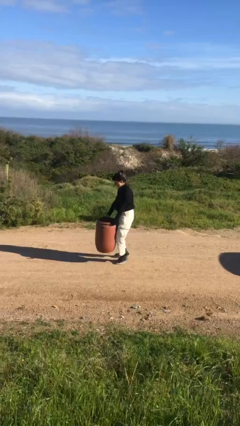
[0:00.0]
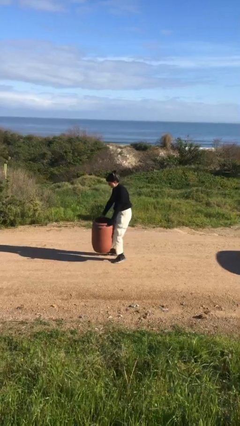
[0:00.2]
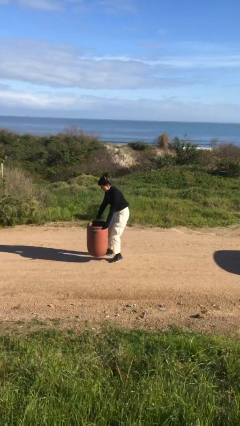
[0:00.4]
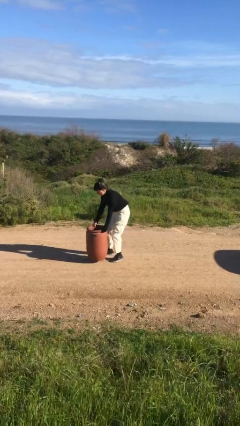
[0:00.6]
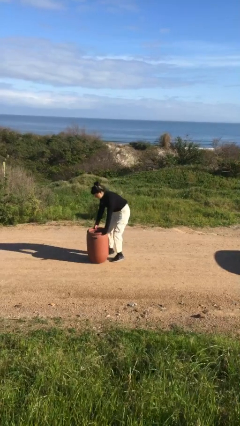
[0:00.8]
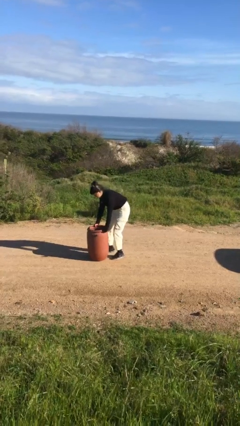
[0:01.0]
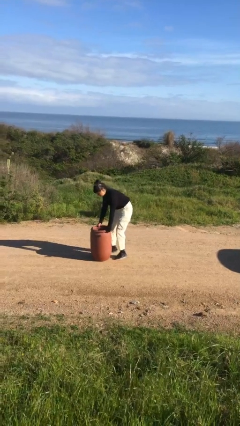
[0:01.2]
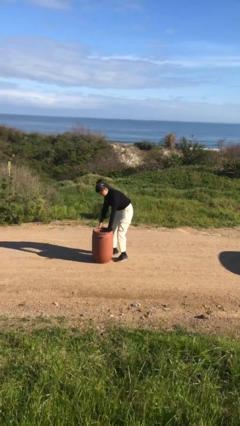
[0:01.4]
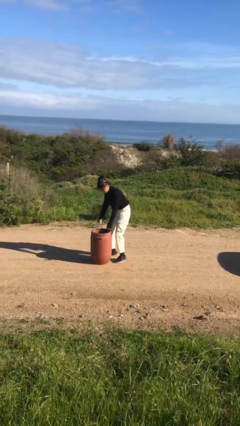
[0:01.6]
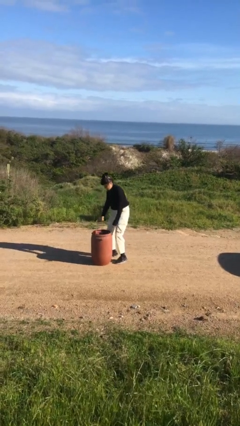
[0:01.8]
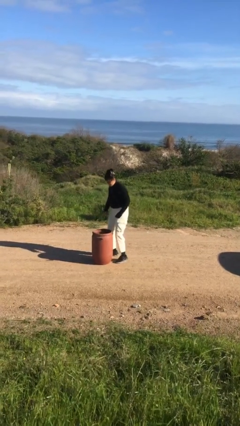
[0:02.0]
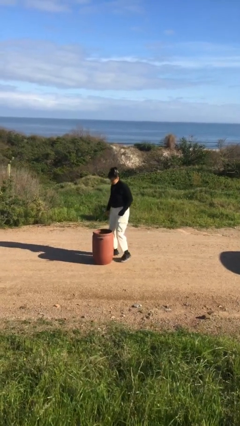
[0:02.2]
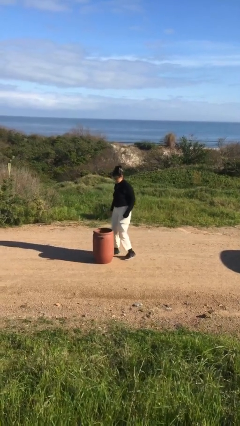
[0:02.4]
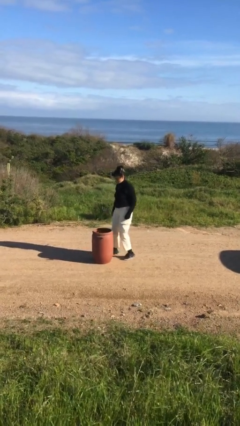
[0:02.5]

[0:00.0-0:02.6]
person puts down object on floor

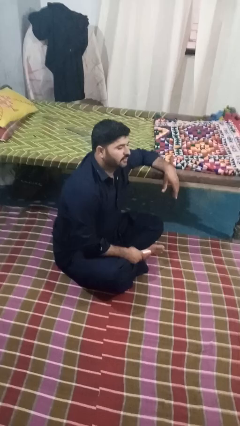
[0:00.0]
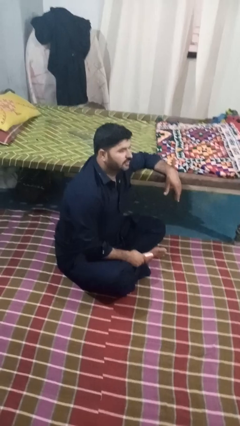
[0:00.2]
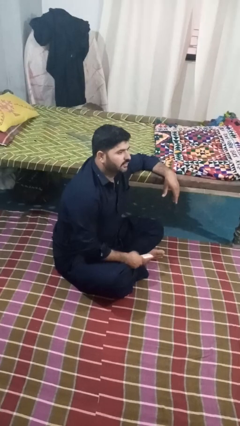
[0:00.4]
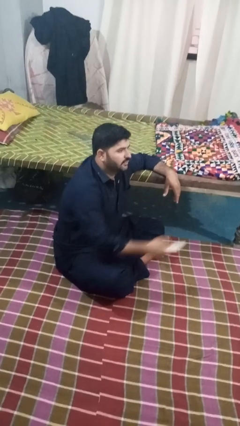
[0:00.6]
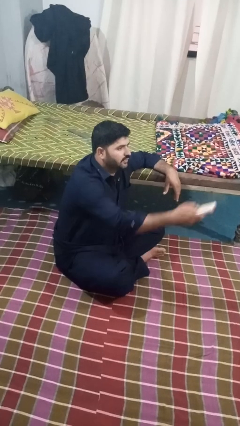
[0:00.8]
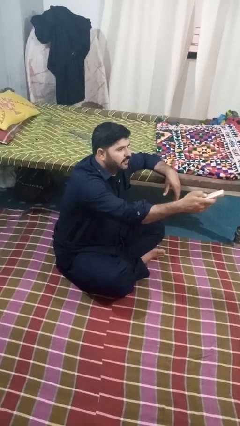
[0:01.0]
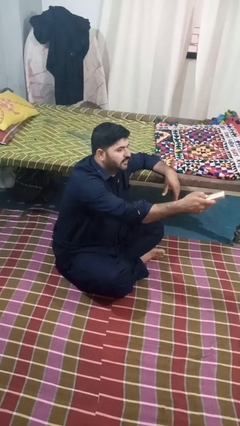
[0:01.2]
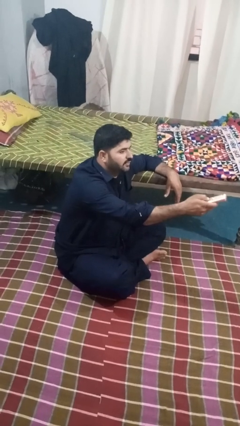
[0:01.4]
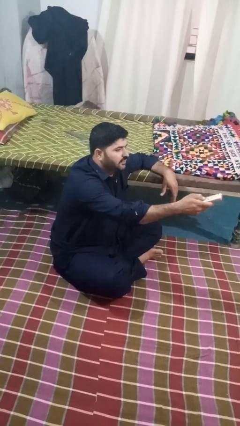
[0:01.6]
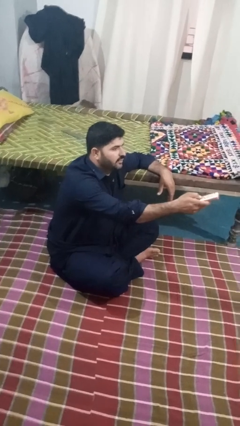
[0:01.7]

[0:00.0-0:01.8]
person uses television remote

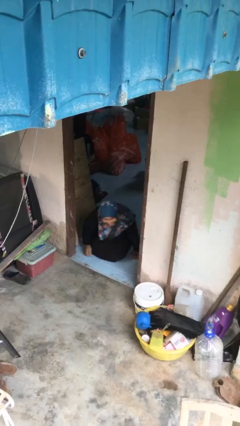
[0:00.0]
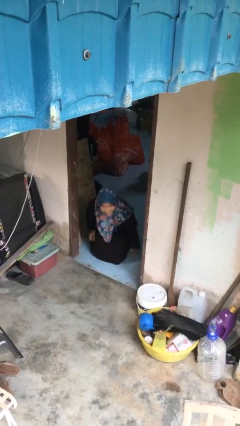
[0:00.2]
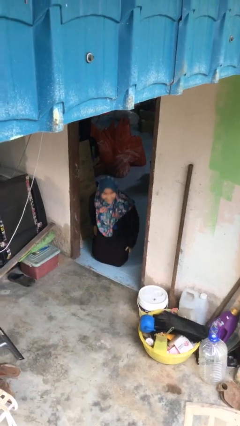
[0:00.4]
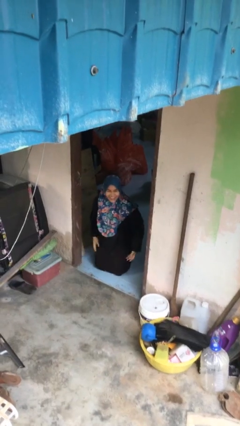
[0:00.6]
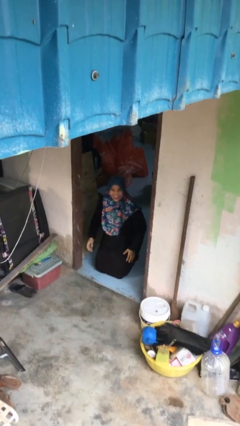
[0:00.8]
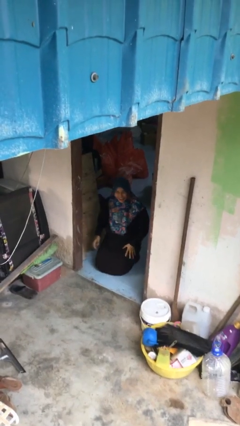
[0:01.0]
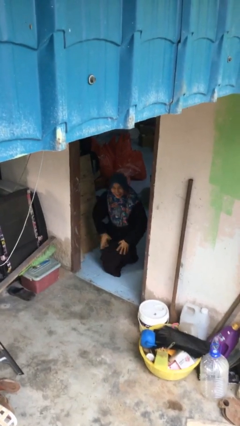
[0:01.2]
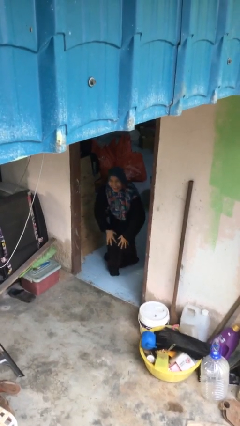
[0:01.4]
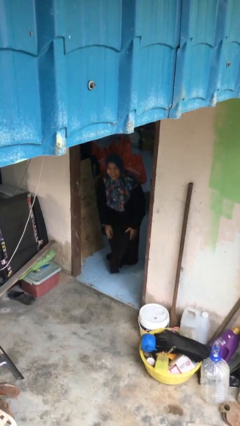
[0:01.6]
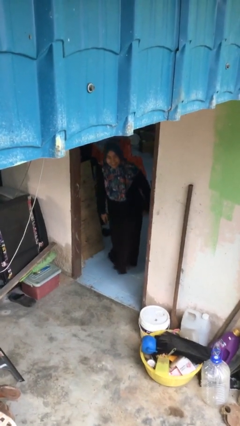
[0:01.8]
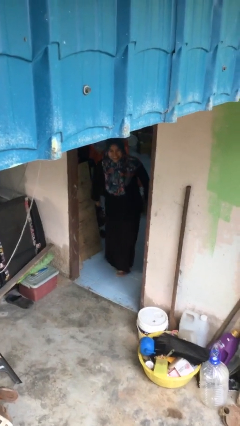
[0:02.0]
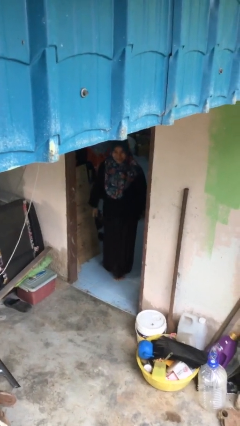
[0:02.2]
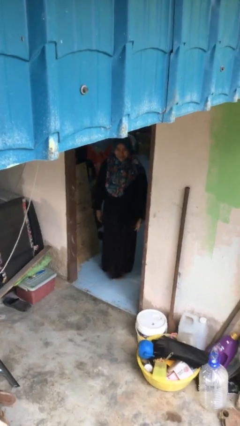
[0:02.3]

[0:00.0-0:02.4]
person stands up

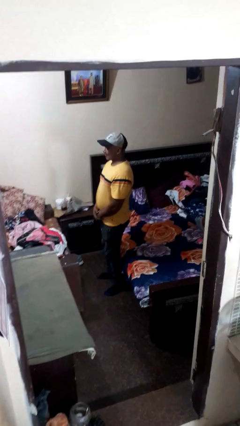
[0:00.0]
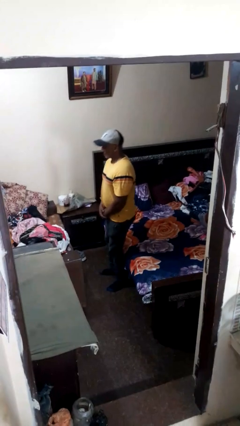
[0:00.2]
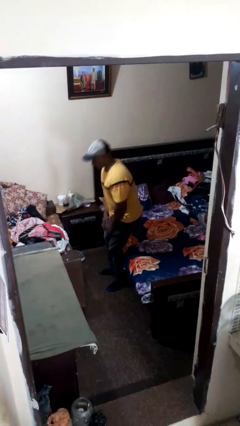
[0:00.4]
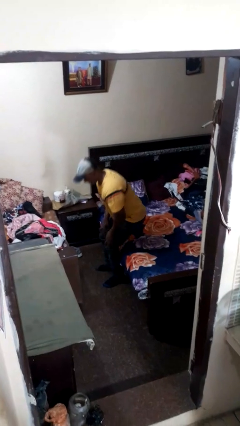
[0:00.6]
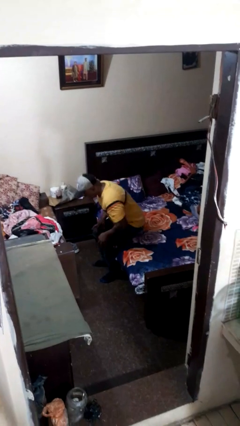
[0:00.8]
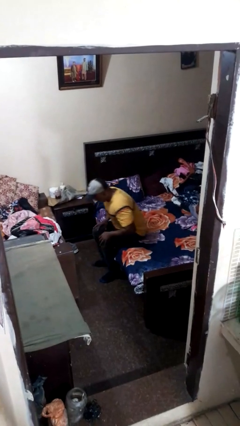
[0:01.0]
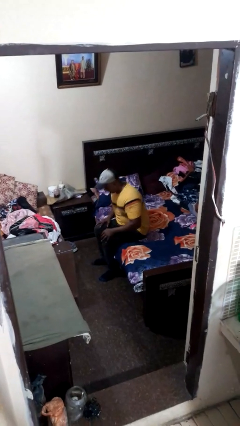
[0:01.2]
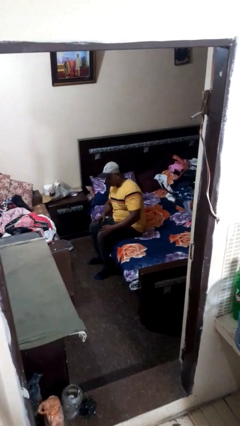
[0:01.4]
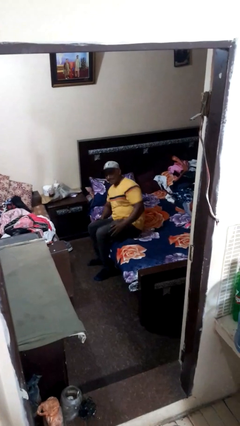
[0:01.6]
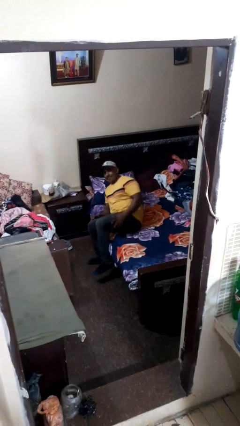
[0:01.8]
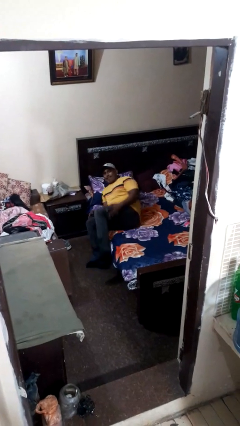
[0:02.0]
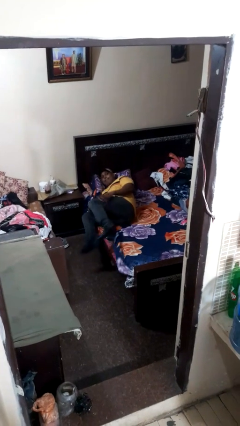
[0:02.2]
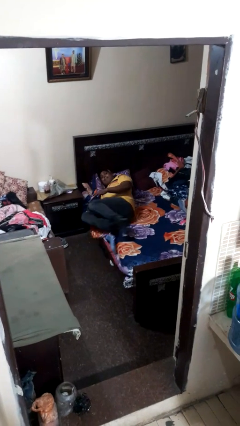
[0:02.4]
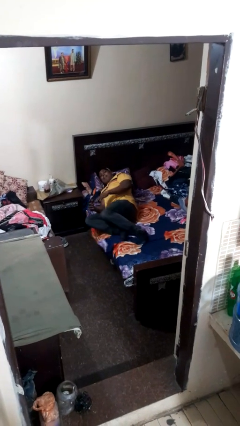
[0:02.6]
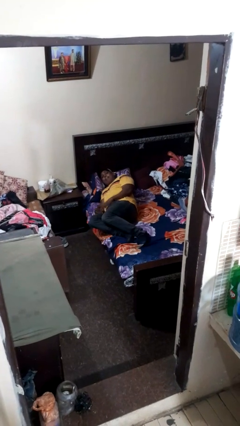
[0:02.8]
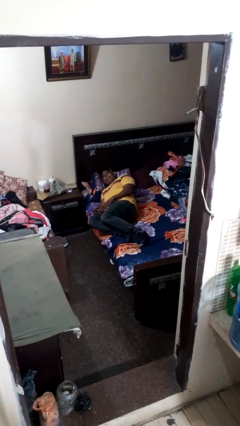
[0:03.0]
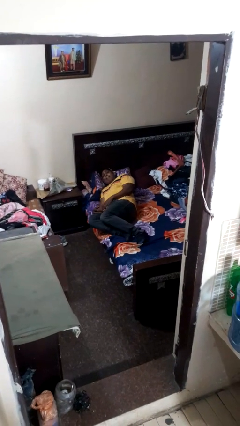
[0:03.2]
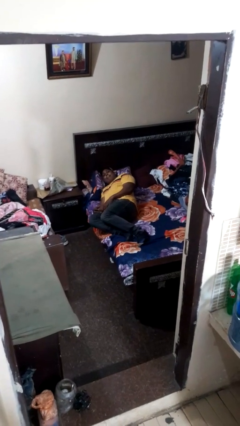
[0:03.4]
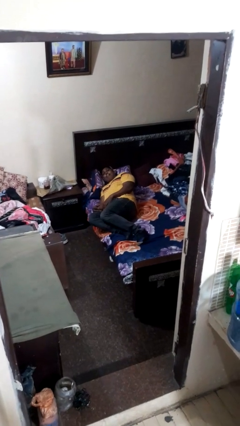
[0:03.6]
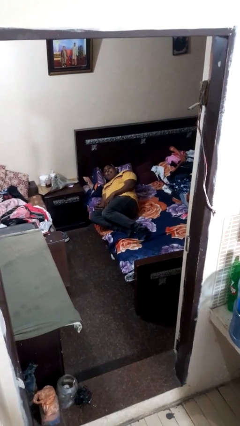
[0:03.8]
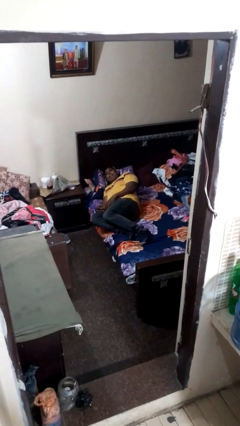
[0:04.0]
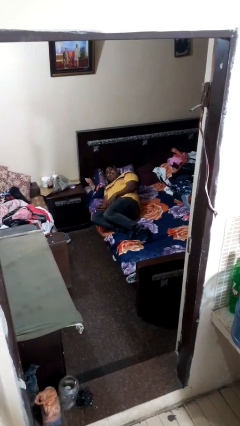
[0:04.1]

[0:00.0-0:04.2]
person lies down on bed

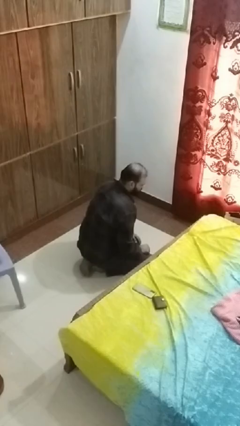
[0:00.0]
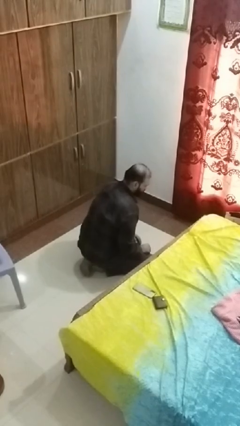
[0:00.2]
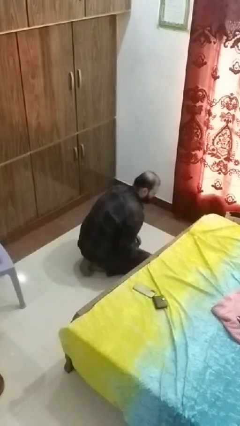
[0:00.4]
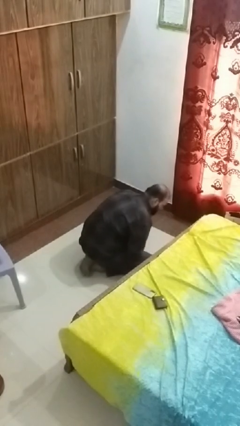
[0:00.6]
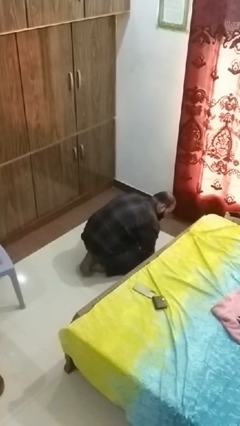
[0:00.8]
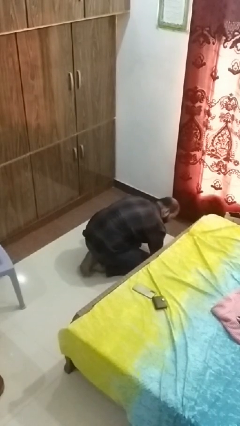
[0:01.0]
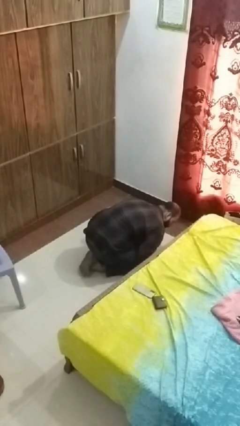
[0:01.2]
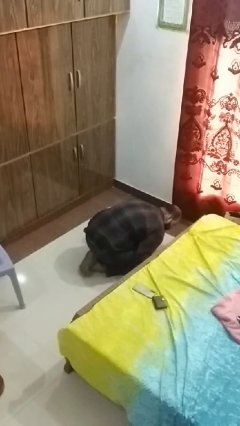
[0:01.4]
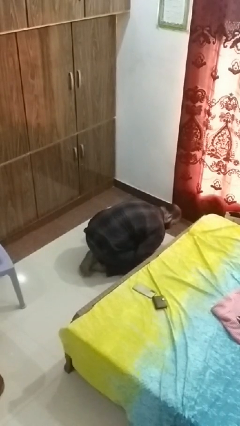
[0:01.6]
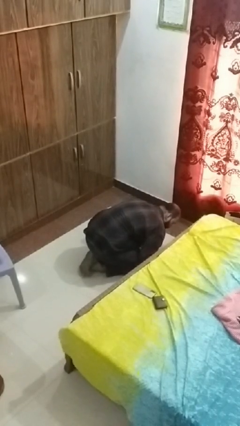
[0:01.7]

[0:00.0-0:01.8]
person searches under bed

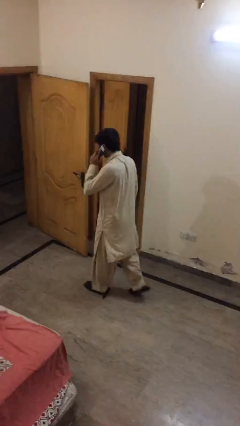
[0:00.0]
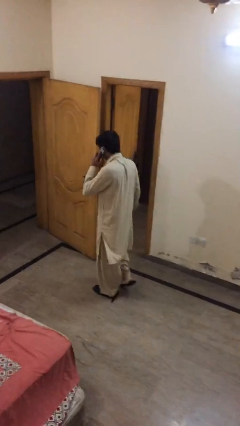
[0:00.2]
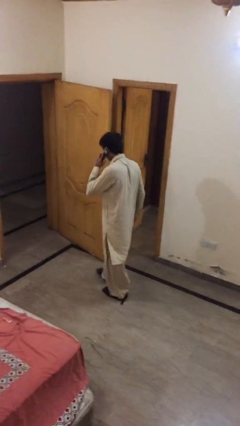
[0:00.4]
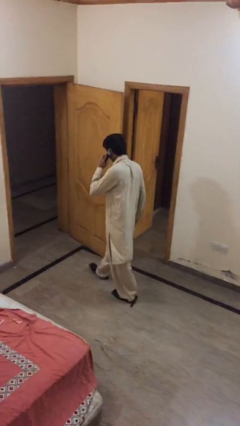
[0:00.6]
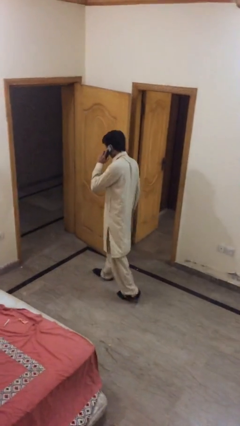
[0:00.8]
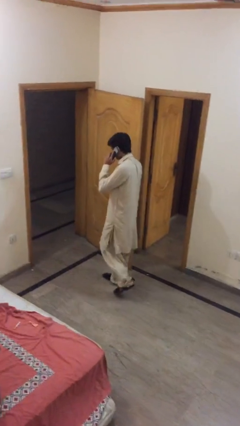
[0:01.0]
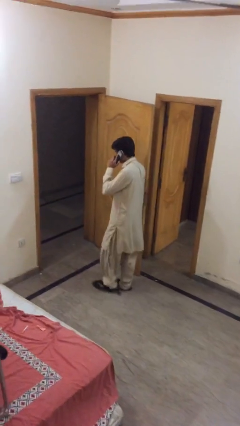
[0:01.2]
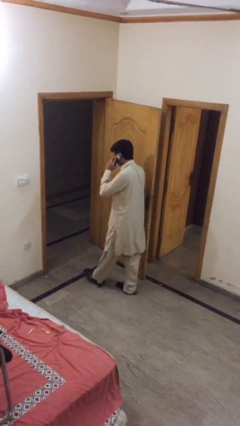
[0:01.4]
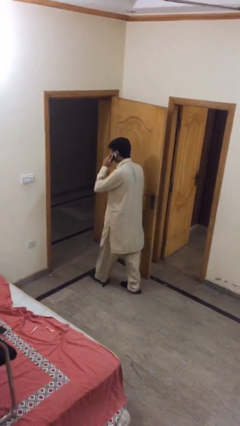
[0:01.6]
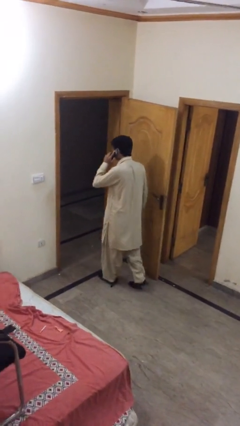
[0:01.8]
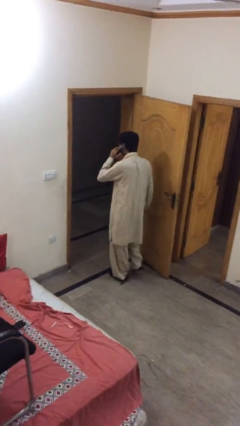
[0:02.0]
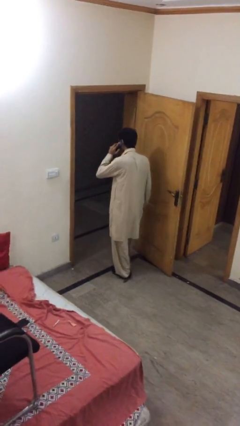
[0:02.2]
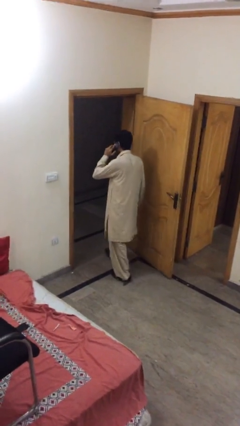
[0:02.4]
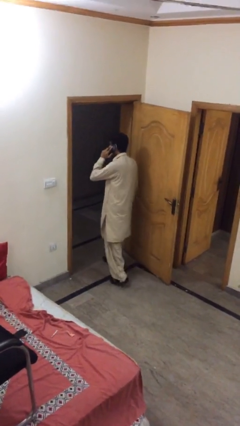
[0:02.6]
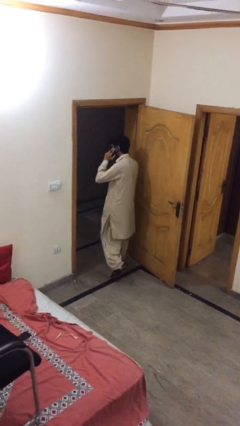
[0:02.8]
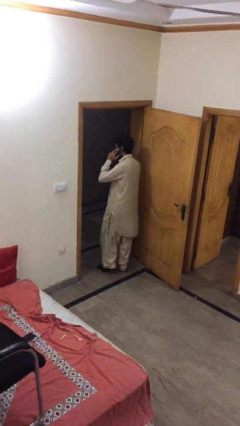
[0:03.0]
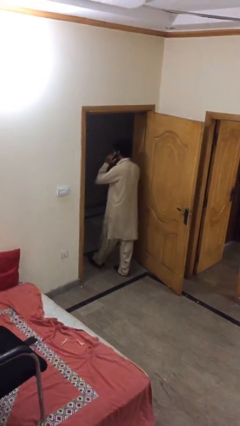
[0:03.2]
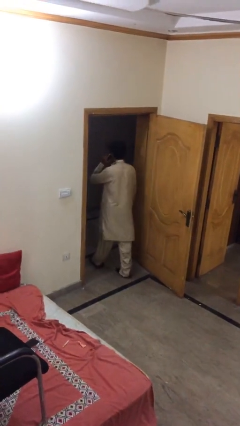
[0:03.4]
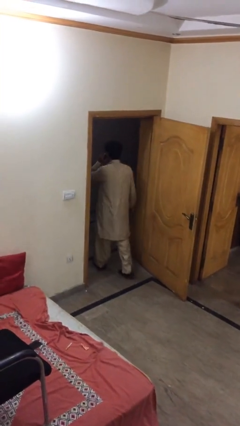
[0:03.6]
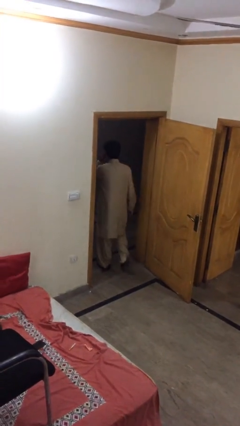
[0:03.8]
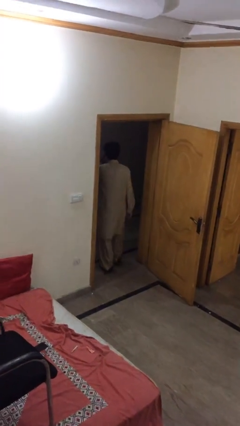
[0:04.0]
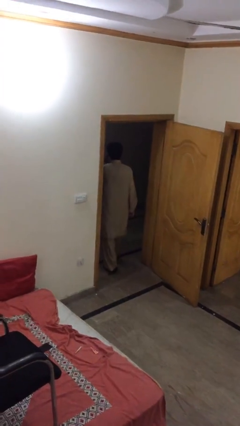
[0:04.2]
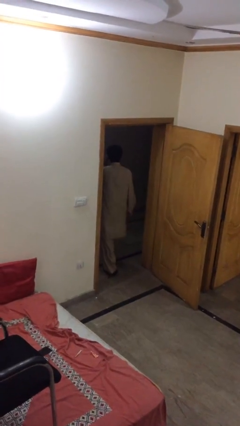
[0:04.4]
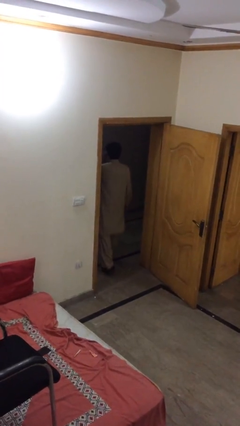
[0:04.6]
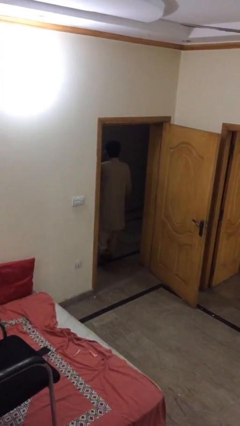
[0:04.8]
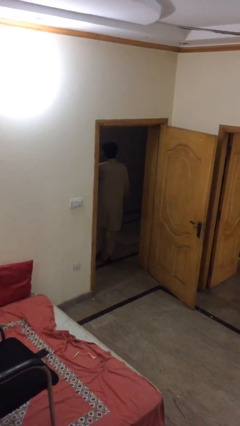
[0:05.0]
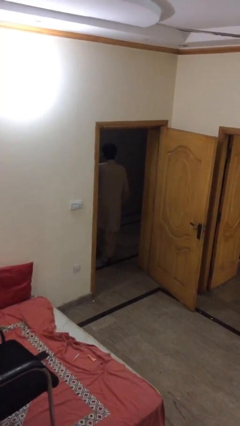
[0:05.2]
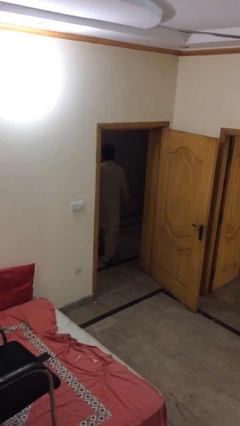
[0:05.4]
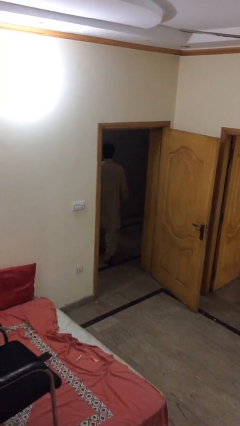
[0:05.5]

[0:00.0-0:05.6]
person exits scene through structure
